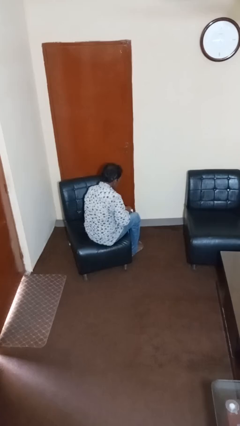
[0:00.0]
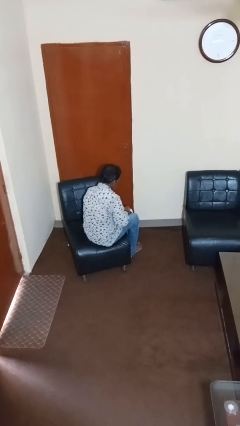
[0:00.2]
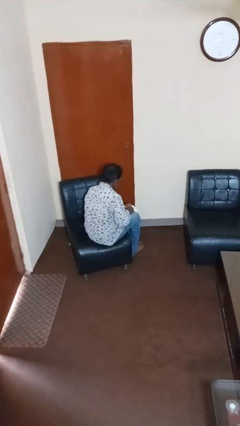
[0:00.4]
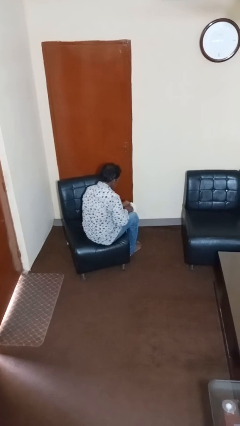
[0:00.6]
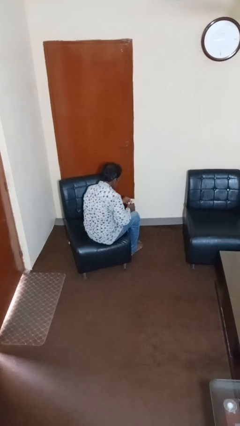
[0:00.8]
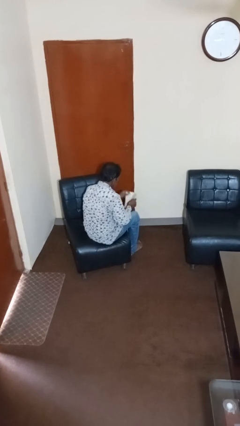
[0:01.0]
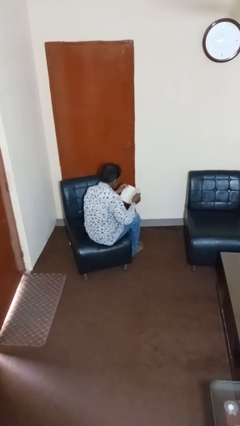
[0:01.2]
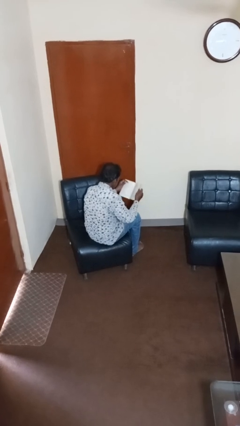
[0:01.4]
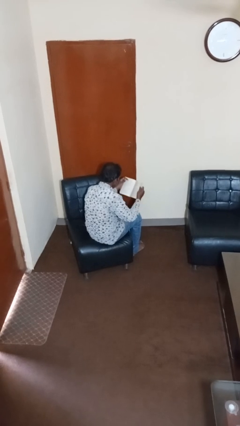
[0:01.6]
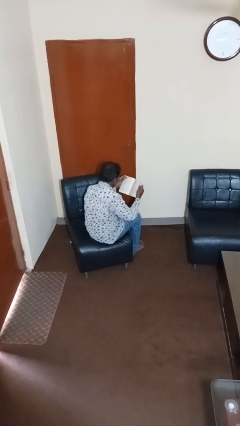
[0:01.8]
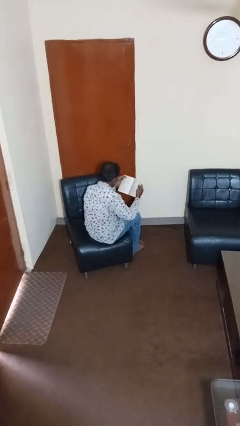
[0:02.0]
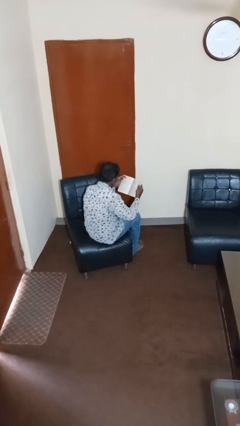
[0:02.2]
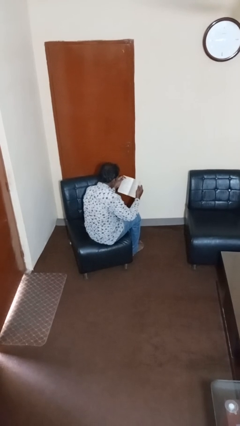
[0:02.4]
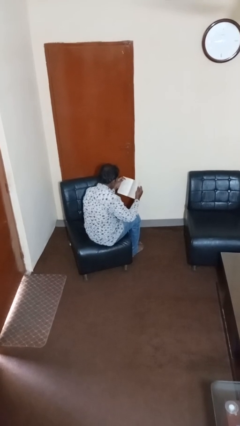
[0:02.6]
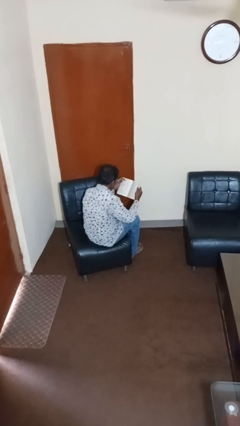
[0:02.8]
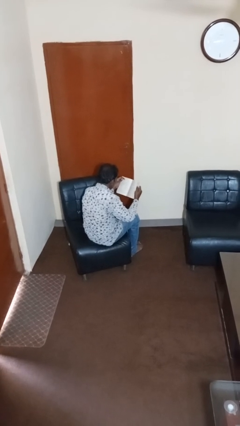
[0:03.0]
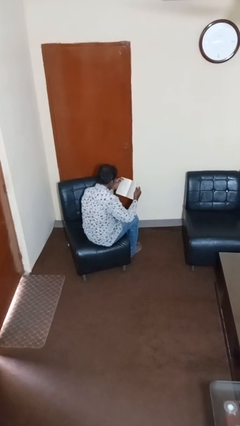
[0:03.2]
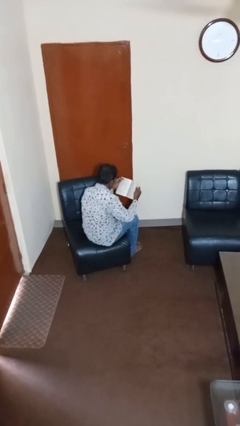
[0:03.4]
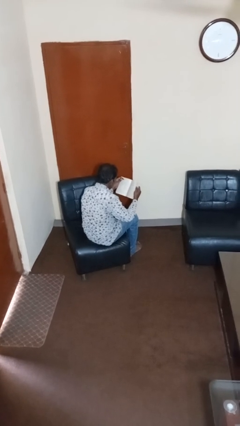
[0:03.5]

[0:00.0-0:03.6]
person reads book

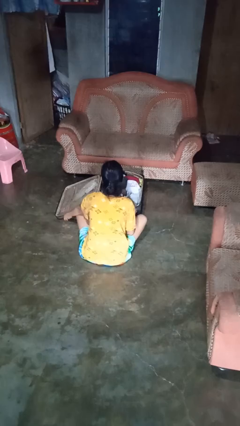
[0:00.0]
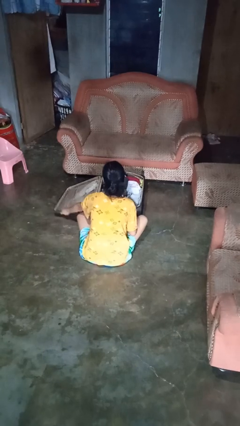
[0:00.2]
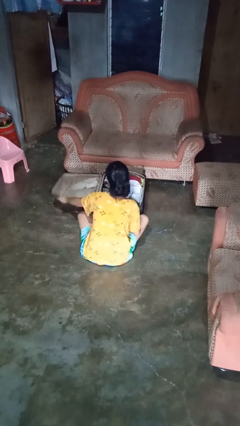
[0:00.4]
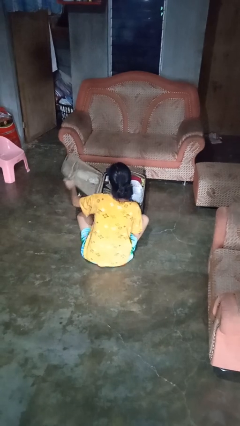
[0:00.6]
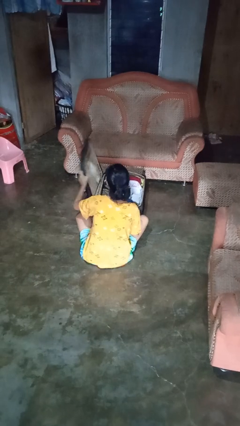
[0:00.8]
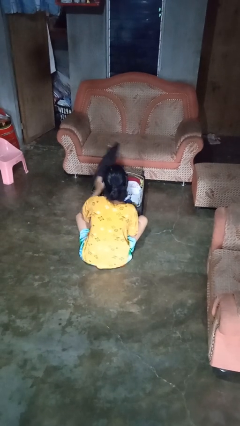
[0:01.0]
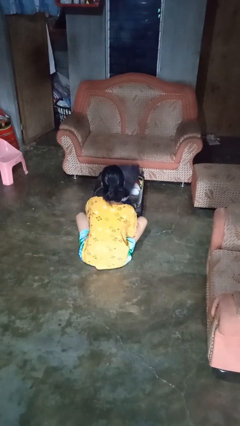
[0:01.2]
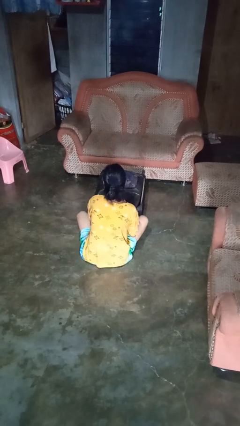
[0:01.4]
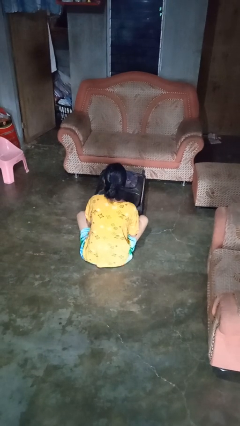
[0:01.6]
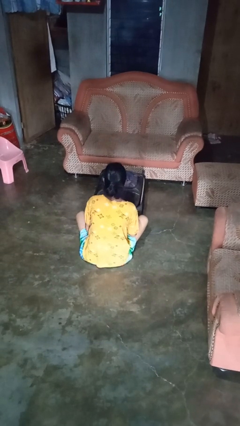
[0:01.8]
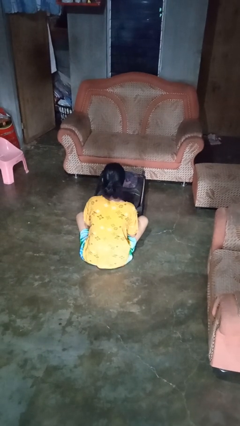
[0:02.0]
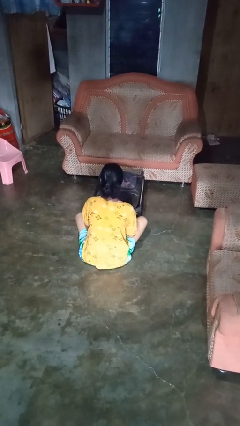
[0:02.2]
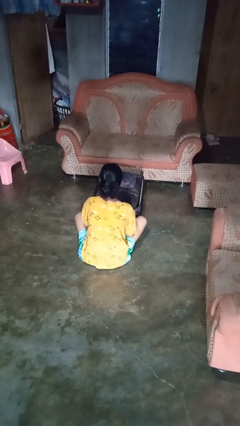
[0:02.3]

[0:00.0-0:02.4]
person closes suitcase

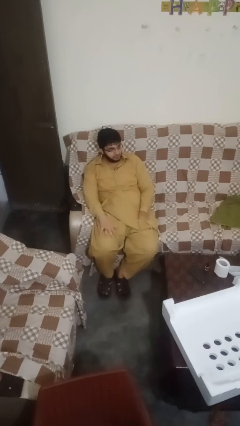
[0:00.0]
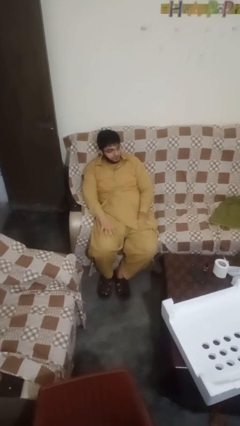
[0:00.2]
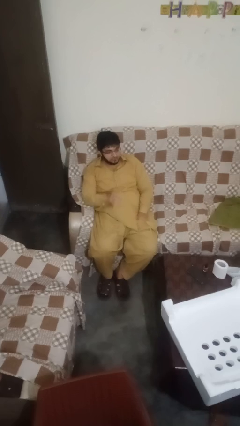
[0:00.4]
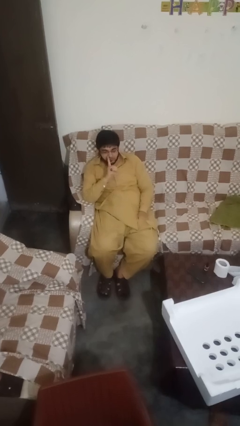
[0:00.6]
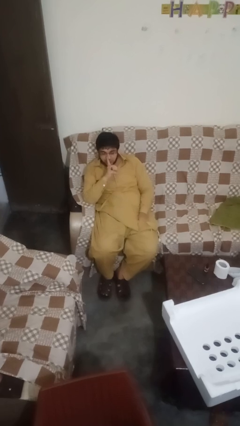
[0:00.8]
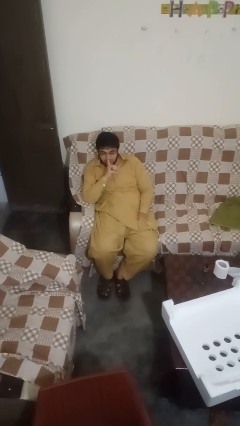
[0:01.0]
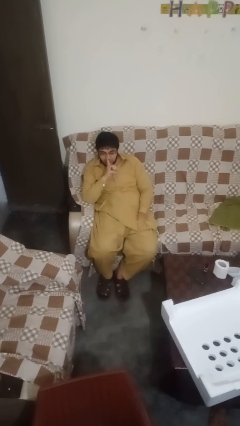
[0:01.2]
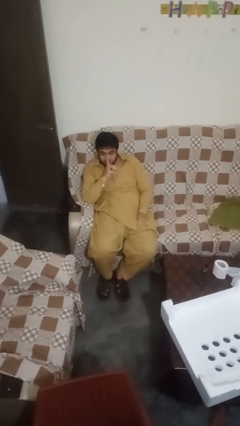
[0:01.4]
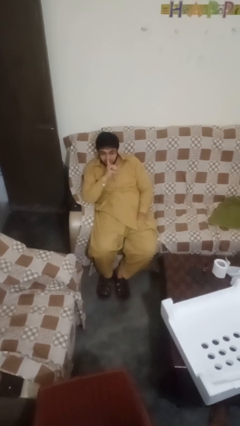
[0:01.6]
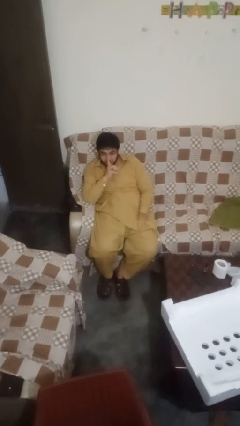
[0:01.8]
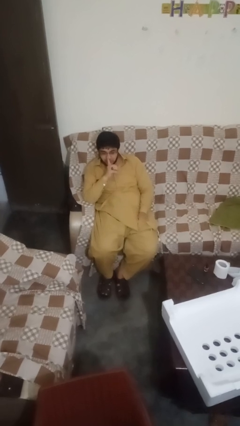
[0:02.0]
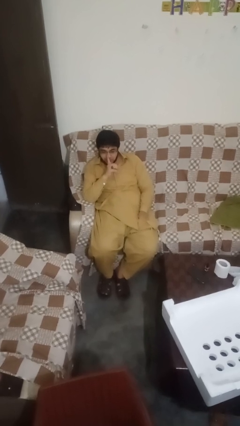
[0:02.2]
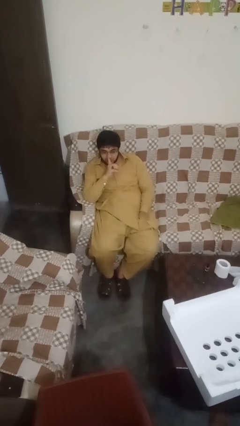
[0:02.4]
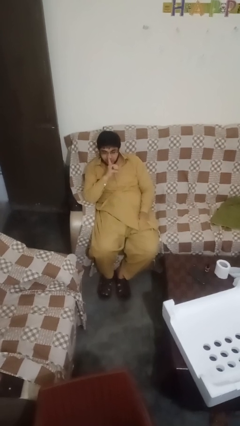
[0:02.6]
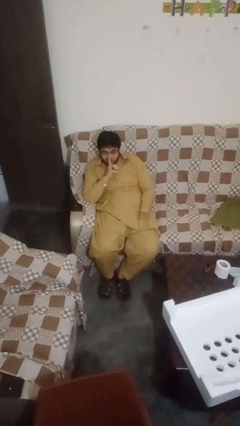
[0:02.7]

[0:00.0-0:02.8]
person gestures be quiet

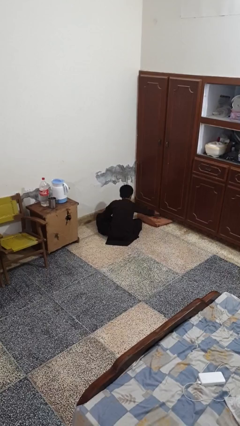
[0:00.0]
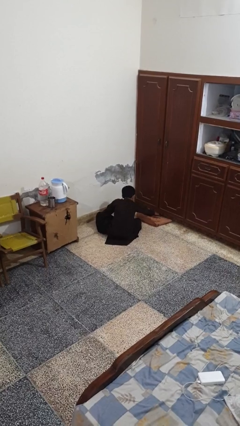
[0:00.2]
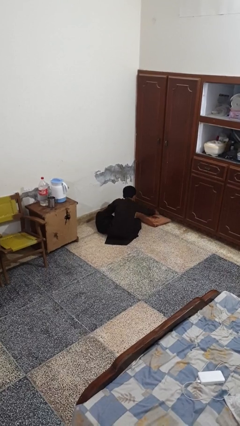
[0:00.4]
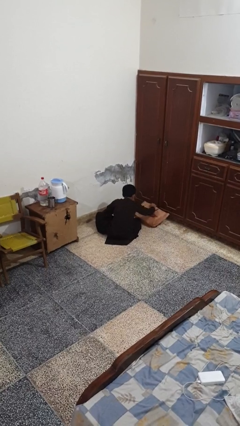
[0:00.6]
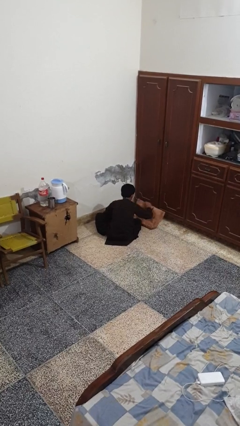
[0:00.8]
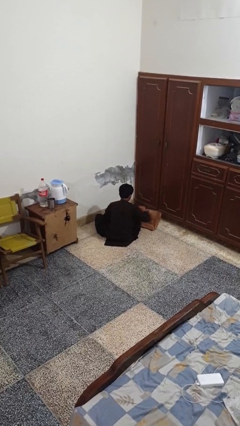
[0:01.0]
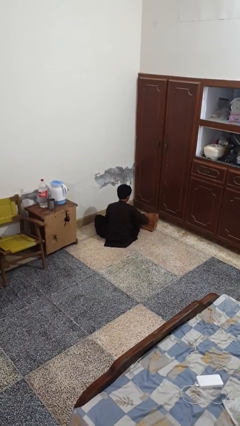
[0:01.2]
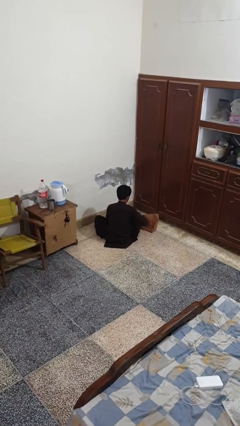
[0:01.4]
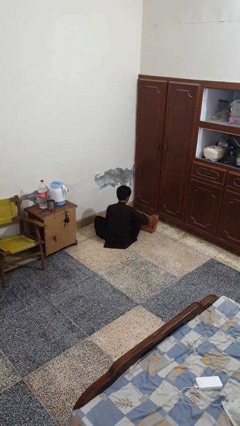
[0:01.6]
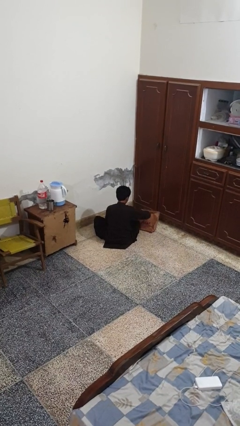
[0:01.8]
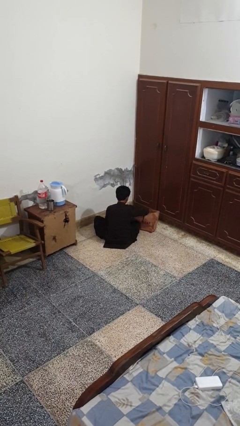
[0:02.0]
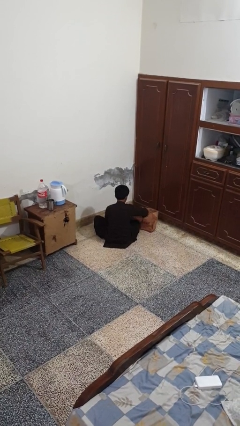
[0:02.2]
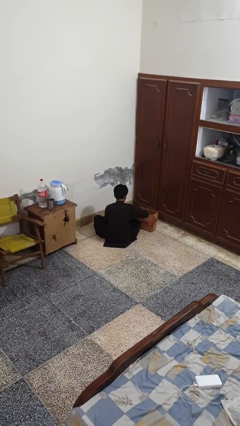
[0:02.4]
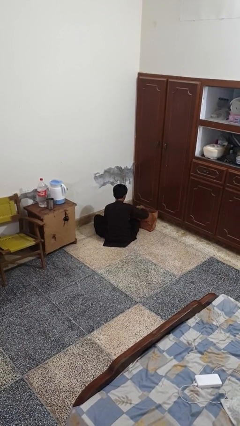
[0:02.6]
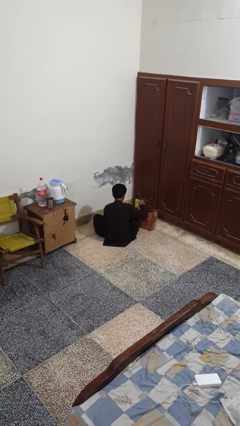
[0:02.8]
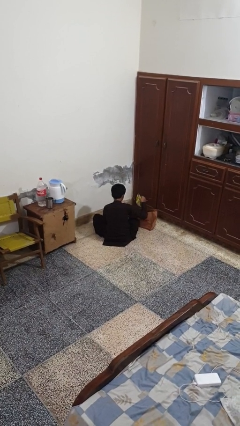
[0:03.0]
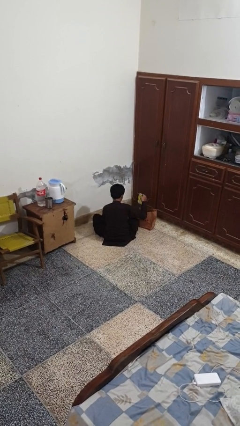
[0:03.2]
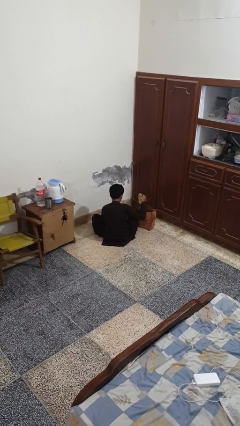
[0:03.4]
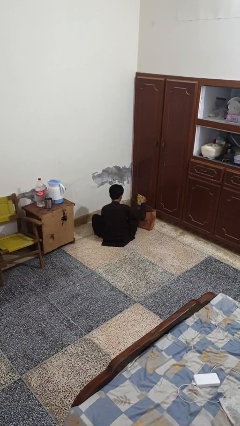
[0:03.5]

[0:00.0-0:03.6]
person takes object from bag

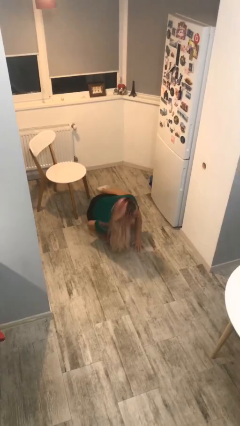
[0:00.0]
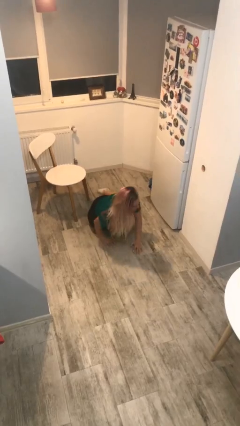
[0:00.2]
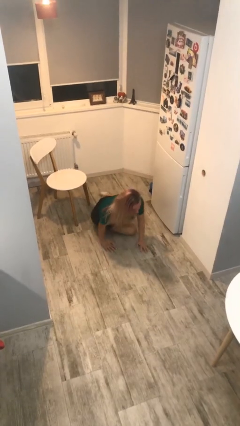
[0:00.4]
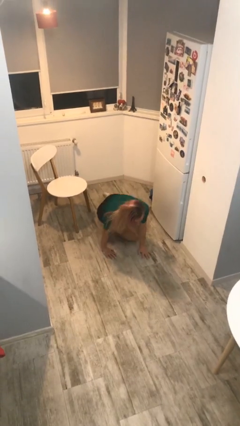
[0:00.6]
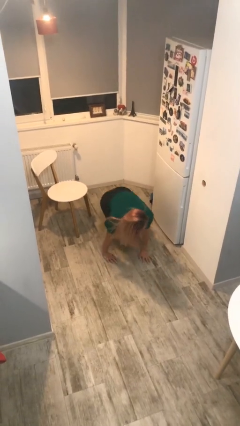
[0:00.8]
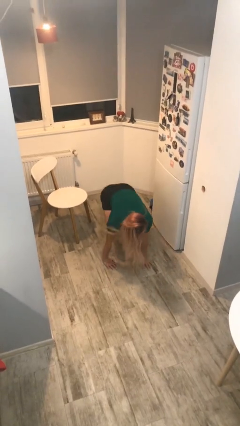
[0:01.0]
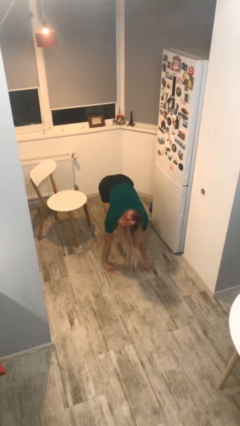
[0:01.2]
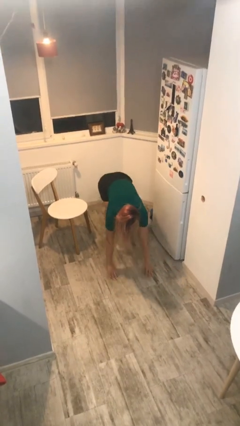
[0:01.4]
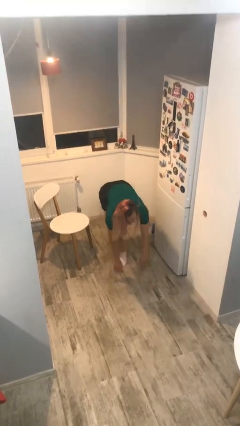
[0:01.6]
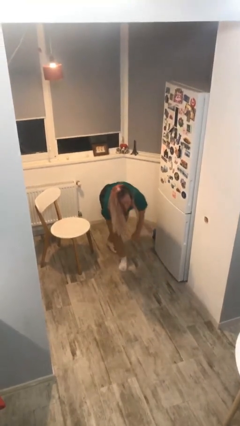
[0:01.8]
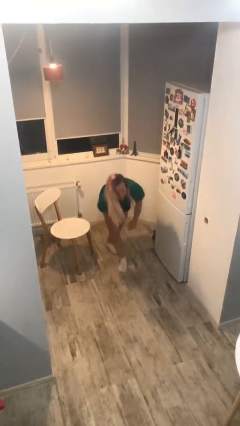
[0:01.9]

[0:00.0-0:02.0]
person stands up from floor

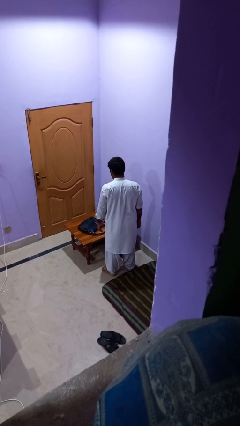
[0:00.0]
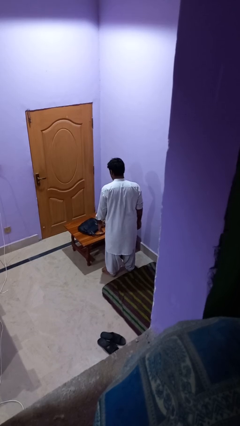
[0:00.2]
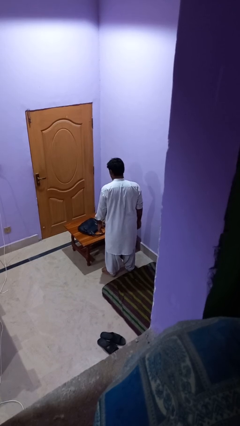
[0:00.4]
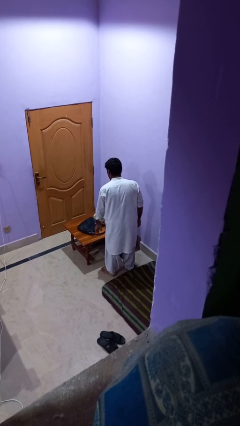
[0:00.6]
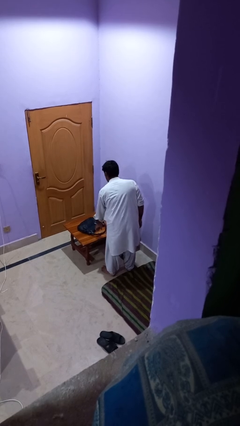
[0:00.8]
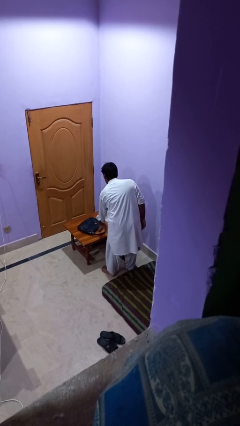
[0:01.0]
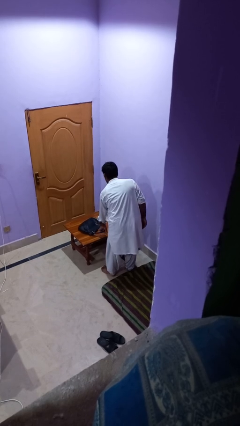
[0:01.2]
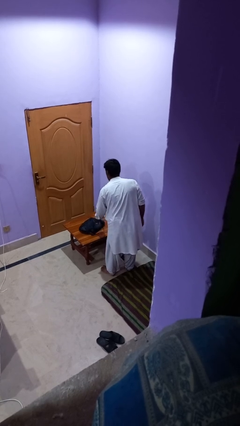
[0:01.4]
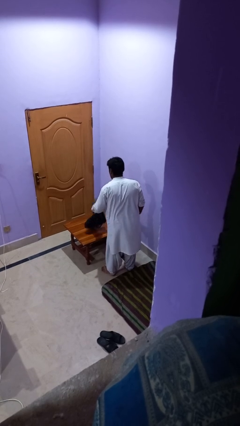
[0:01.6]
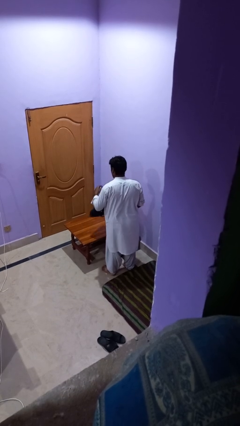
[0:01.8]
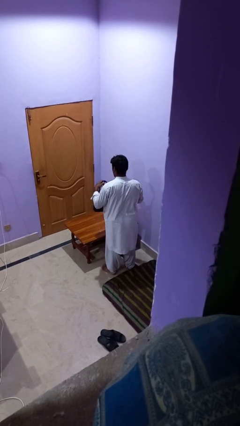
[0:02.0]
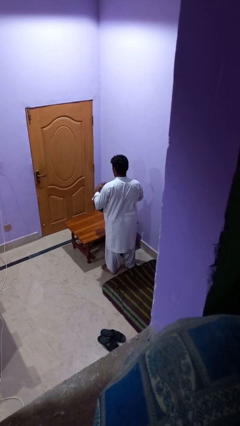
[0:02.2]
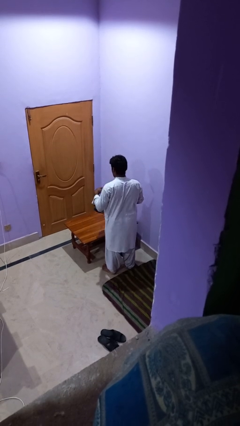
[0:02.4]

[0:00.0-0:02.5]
person picks up object from table

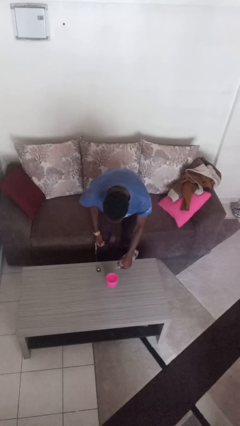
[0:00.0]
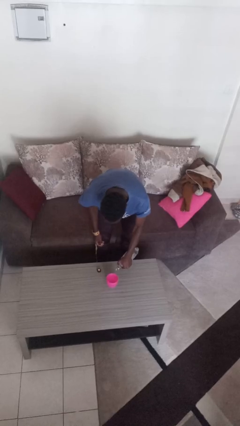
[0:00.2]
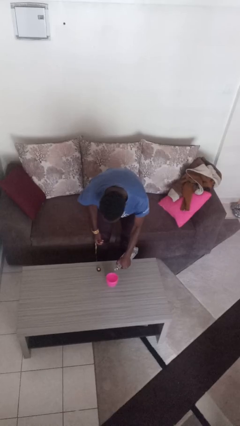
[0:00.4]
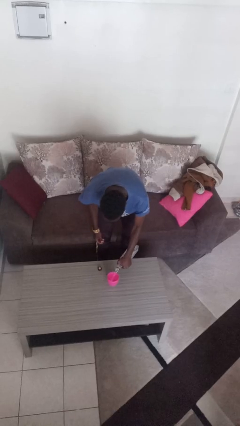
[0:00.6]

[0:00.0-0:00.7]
person pours liquid into cup
